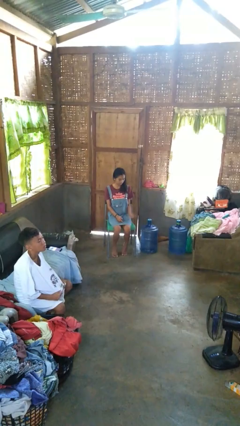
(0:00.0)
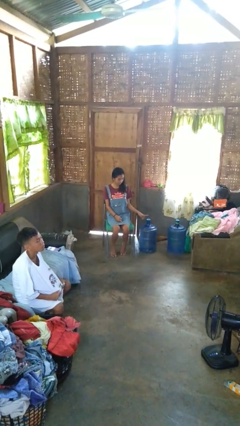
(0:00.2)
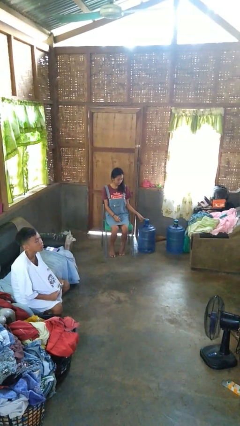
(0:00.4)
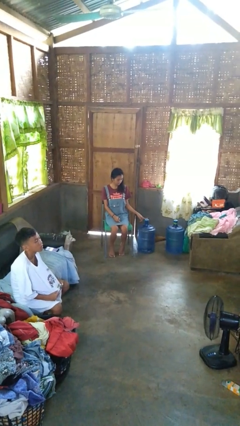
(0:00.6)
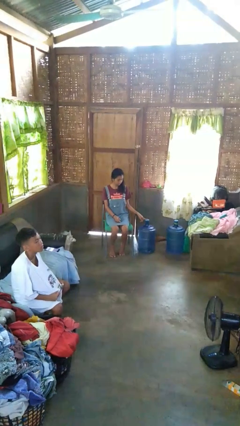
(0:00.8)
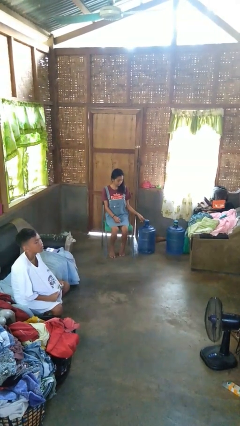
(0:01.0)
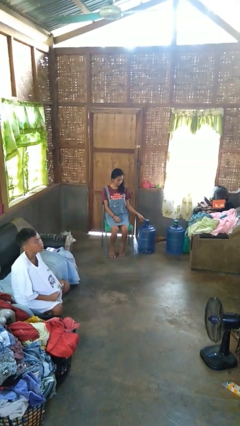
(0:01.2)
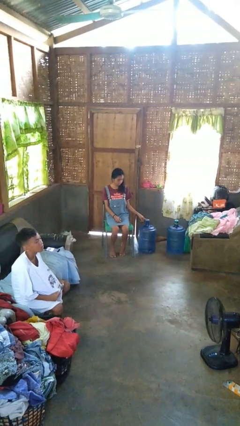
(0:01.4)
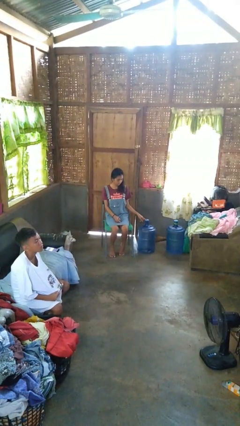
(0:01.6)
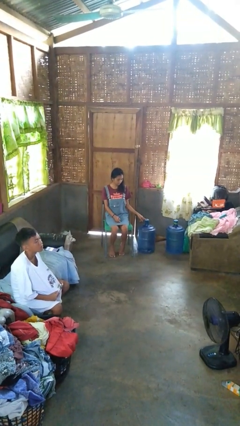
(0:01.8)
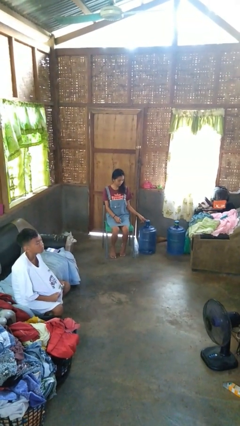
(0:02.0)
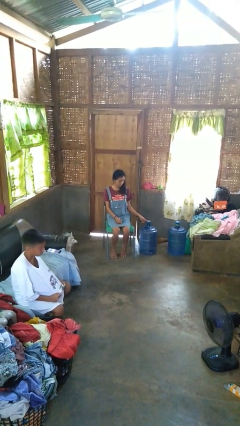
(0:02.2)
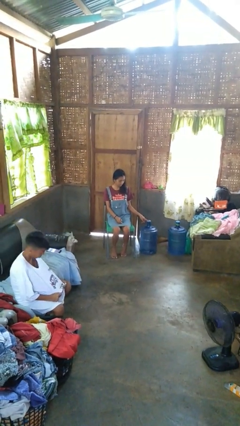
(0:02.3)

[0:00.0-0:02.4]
person taps object with finger

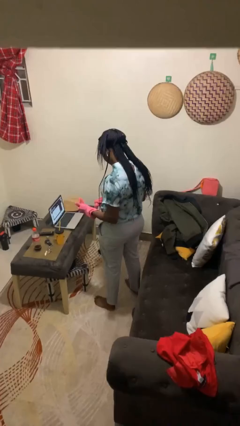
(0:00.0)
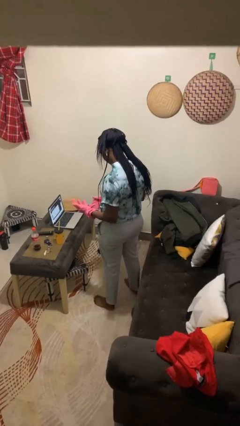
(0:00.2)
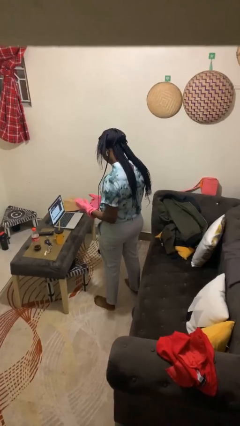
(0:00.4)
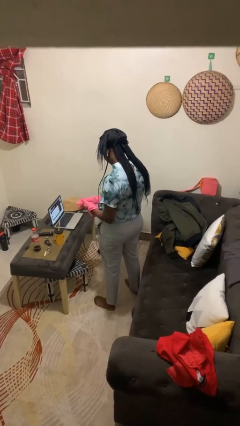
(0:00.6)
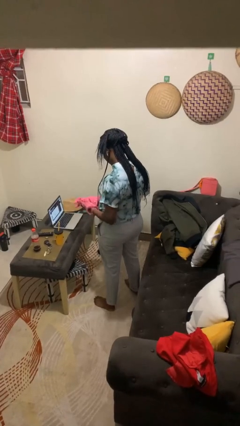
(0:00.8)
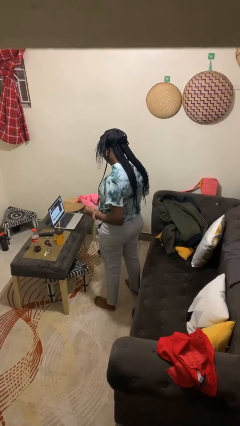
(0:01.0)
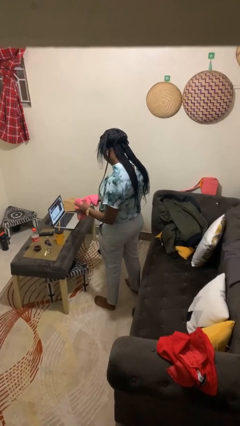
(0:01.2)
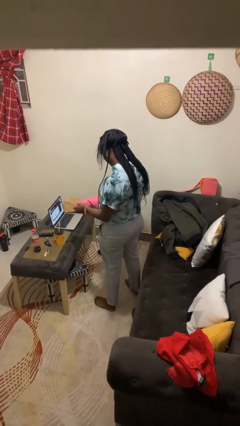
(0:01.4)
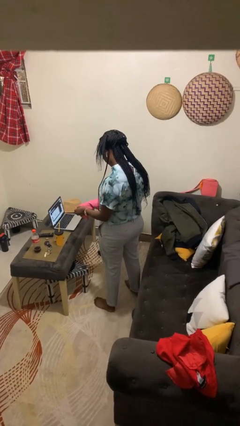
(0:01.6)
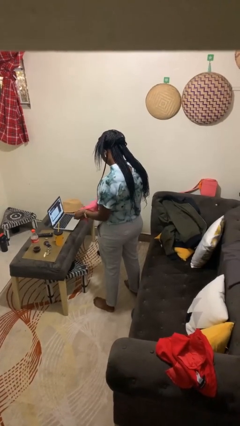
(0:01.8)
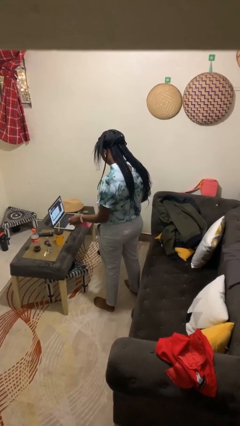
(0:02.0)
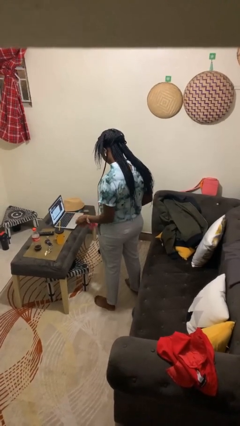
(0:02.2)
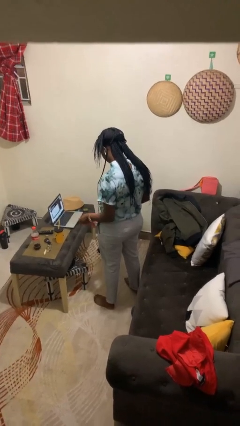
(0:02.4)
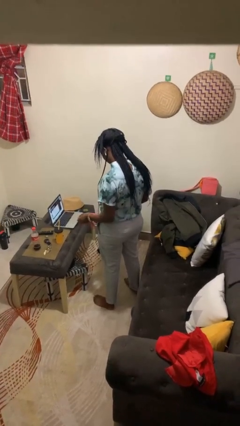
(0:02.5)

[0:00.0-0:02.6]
person takes off gloves

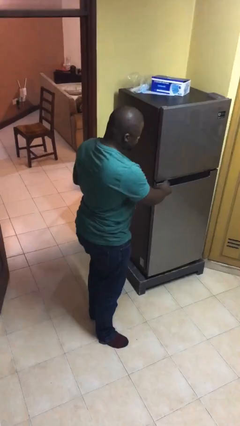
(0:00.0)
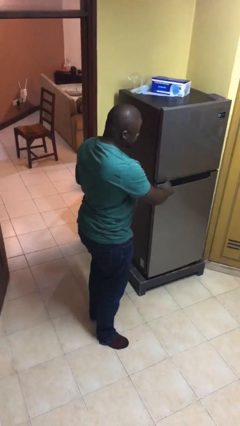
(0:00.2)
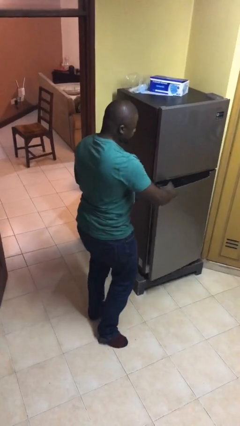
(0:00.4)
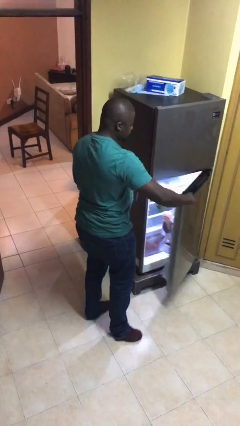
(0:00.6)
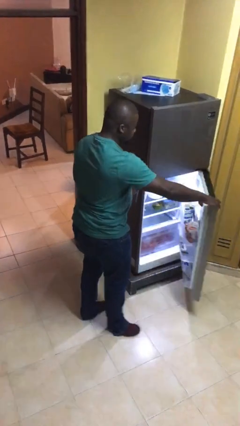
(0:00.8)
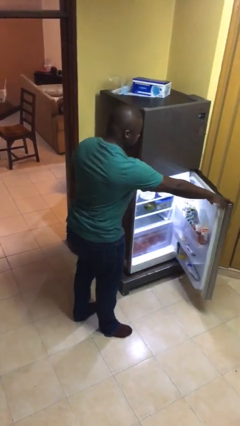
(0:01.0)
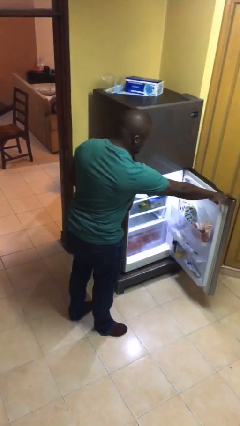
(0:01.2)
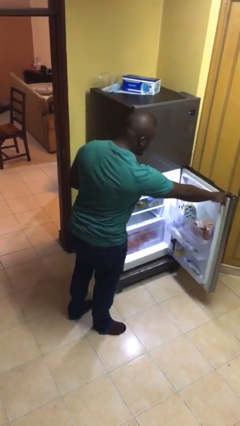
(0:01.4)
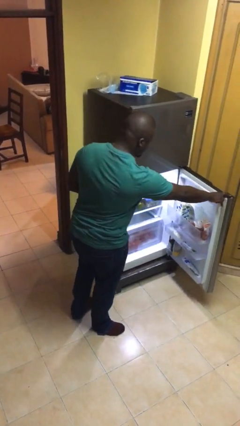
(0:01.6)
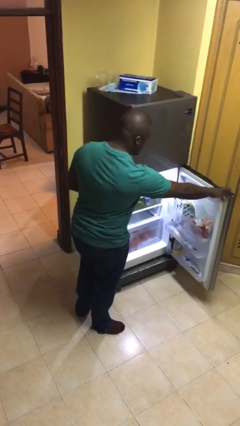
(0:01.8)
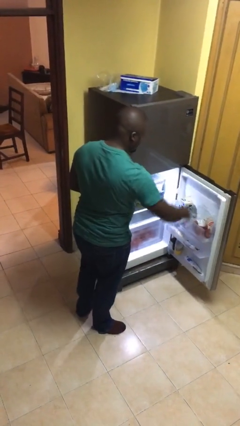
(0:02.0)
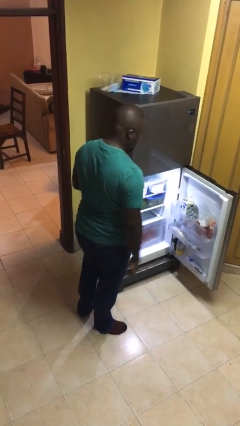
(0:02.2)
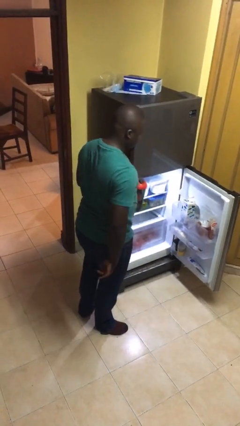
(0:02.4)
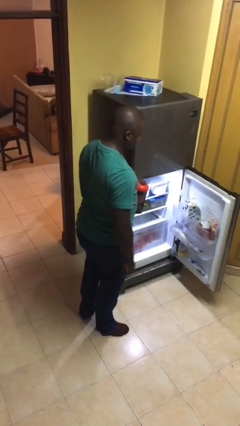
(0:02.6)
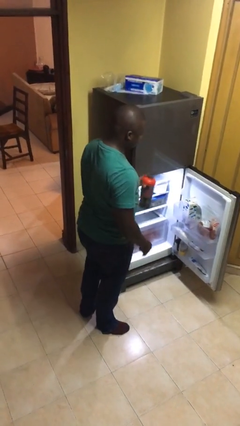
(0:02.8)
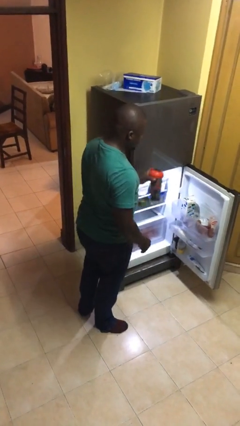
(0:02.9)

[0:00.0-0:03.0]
person opens refrigerator

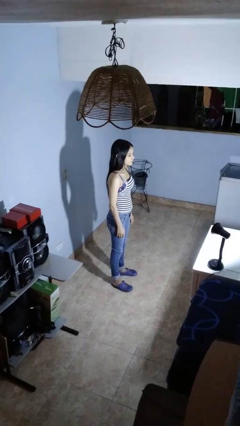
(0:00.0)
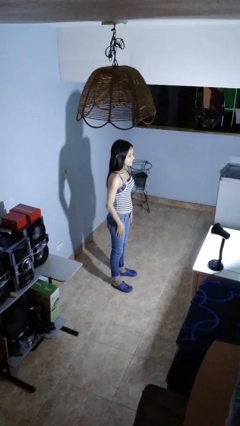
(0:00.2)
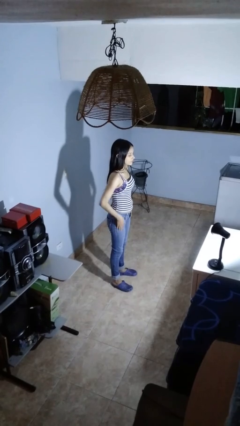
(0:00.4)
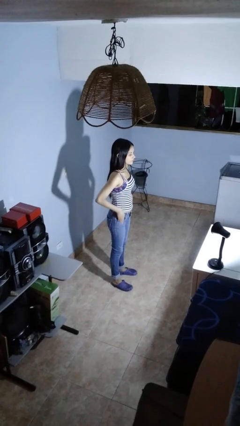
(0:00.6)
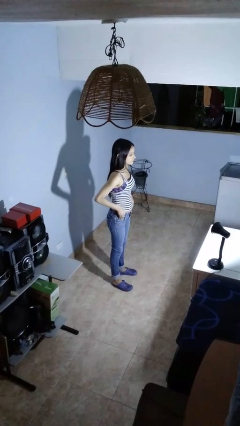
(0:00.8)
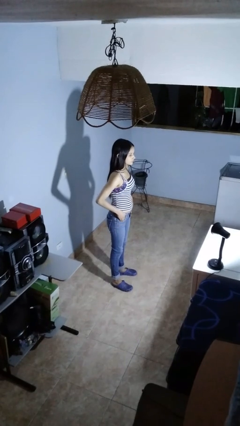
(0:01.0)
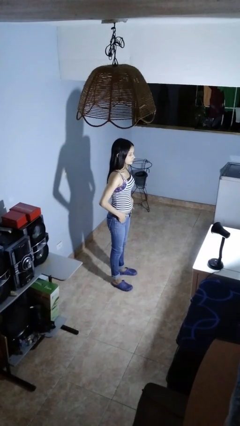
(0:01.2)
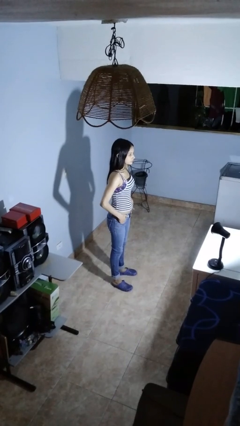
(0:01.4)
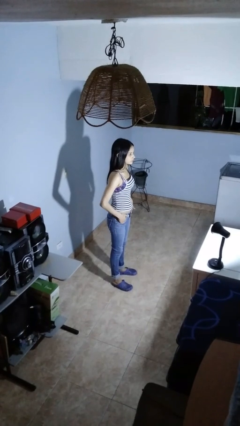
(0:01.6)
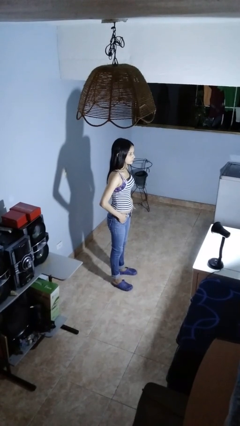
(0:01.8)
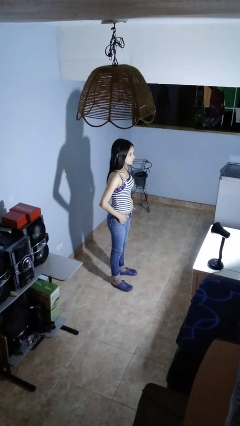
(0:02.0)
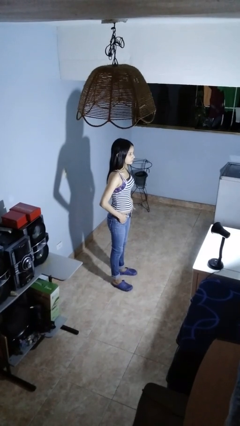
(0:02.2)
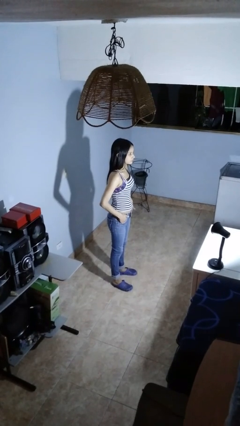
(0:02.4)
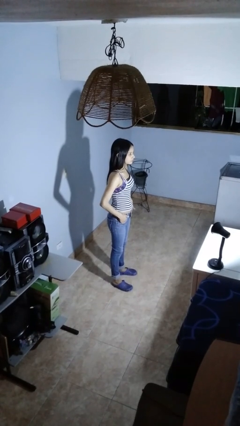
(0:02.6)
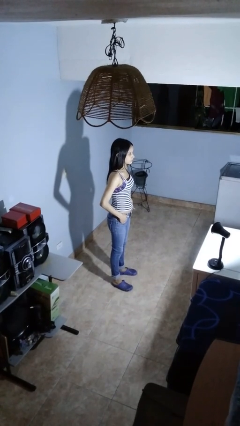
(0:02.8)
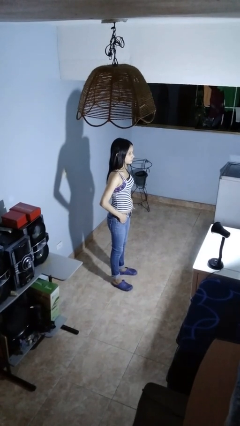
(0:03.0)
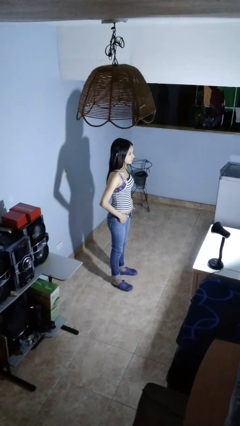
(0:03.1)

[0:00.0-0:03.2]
person puts hands in back pockets

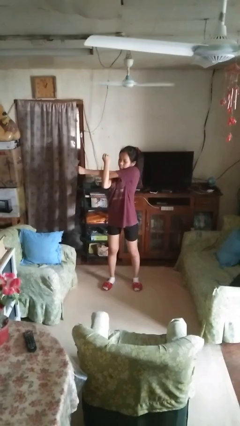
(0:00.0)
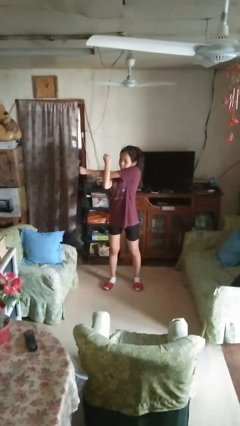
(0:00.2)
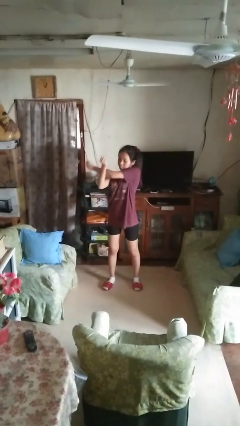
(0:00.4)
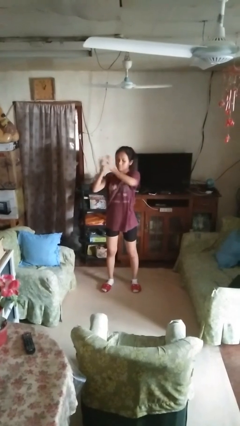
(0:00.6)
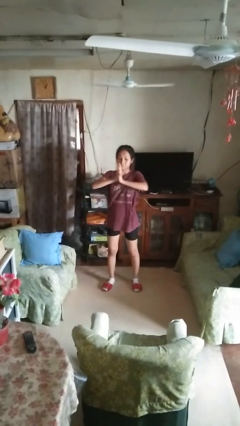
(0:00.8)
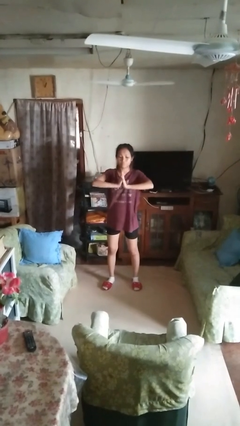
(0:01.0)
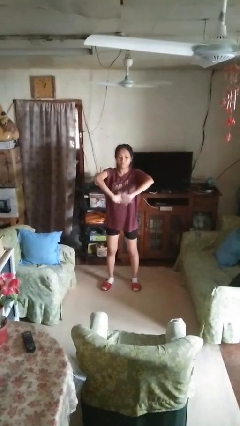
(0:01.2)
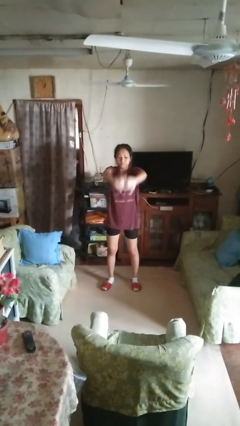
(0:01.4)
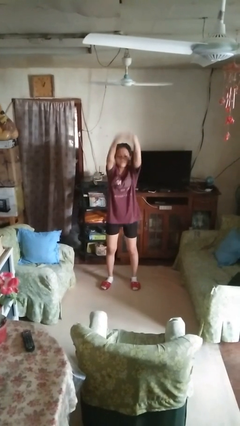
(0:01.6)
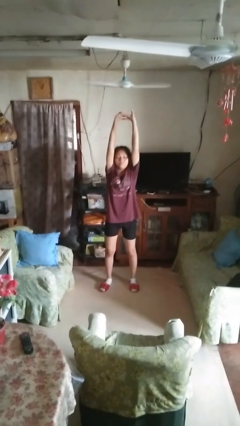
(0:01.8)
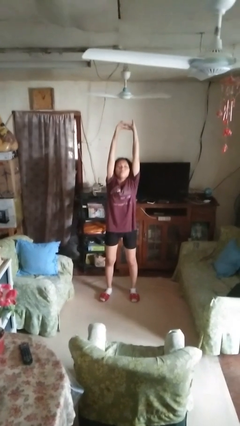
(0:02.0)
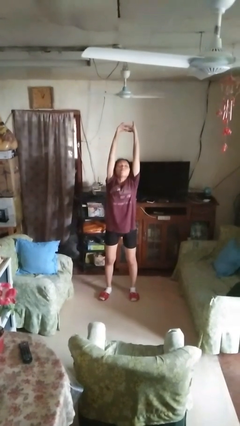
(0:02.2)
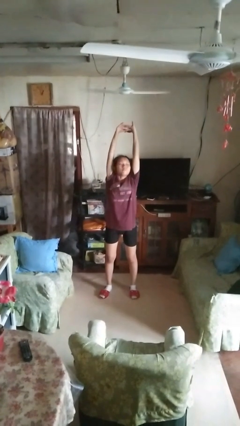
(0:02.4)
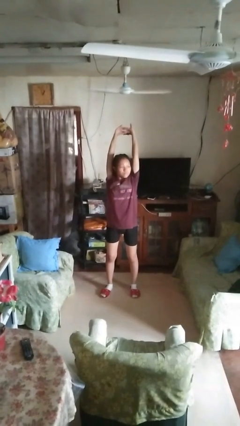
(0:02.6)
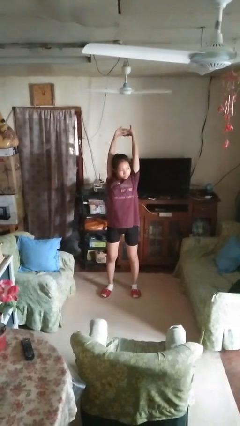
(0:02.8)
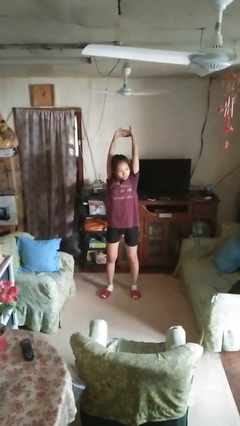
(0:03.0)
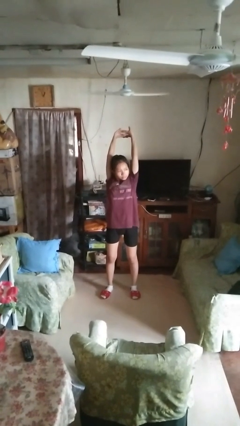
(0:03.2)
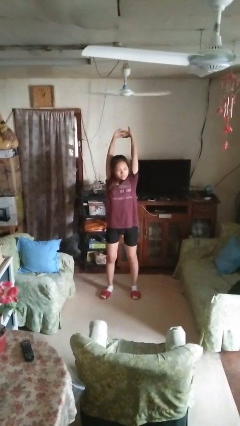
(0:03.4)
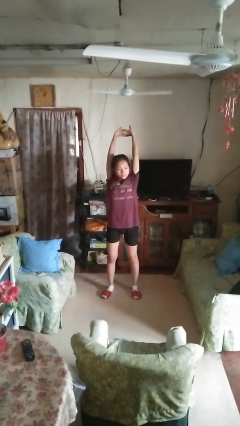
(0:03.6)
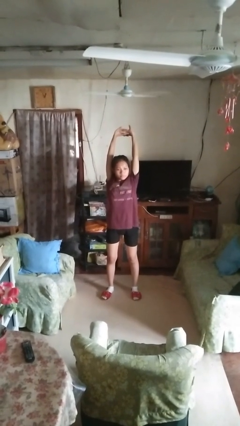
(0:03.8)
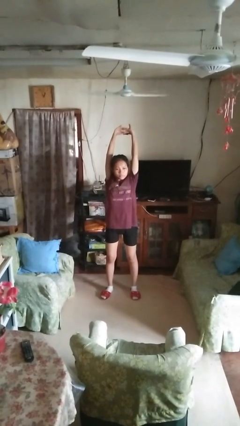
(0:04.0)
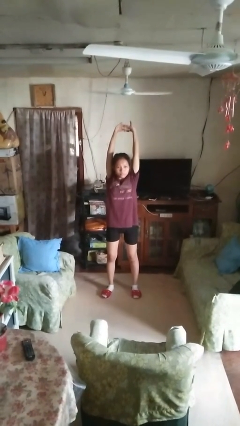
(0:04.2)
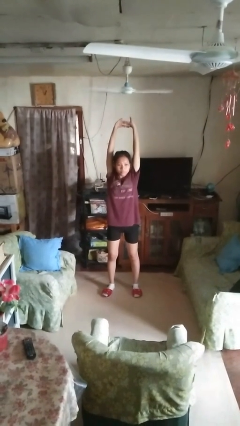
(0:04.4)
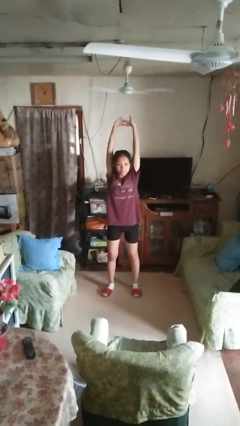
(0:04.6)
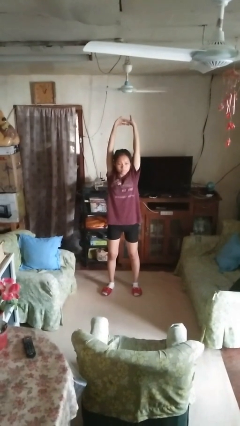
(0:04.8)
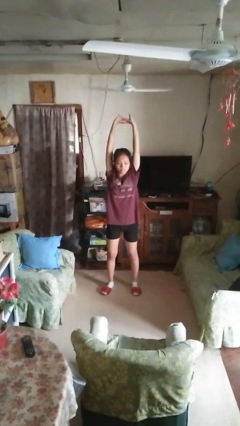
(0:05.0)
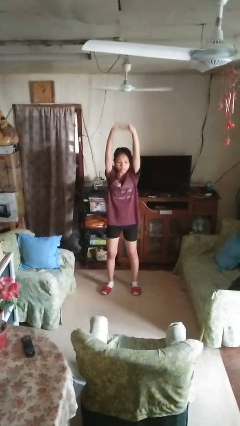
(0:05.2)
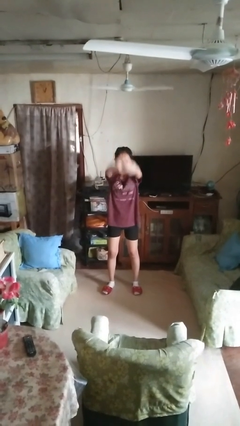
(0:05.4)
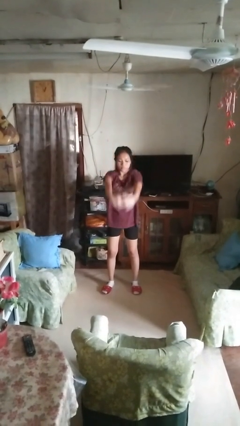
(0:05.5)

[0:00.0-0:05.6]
person stretches arms over head

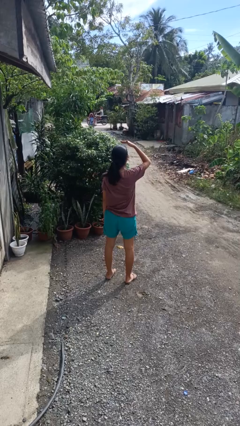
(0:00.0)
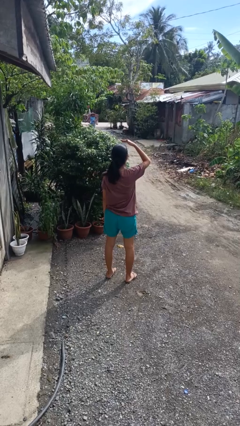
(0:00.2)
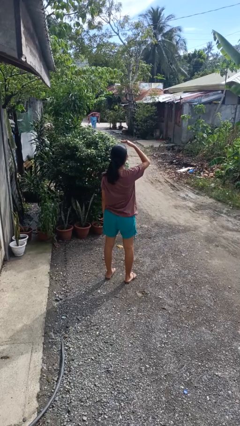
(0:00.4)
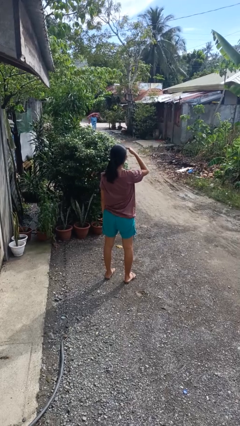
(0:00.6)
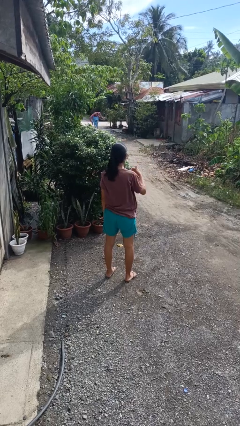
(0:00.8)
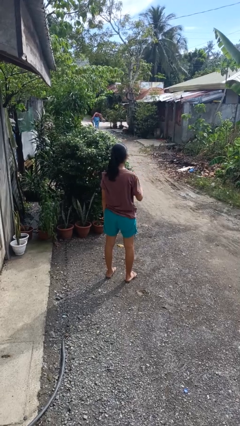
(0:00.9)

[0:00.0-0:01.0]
person shades eyes
